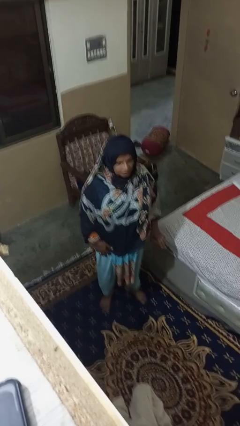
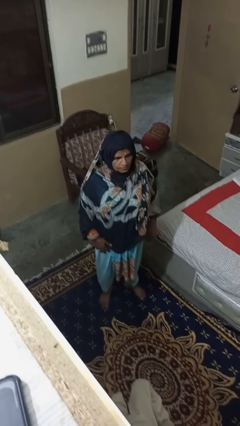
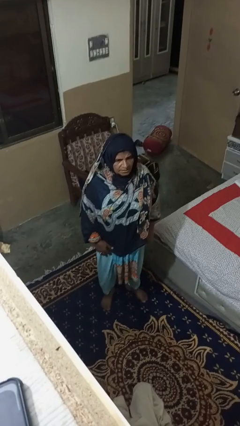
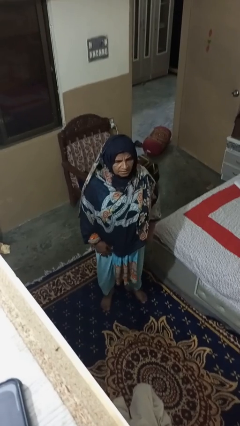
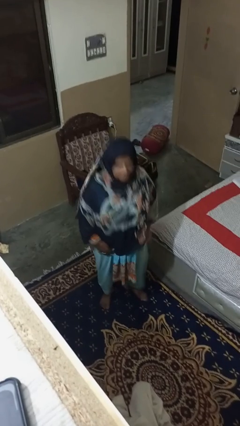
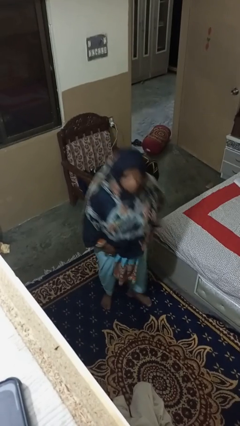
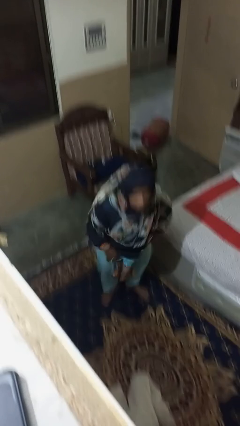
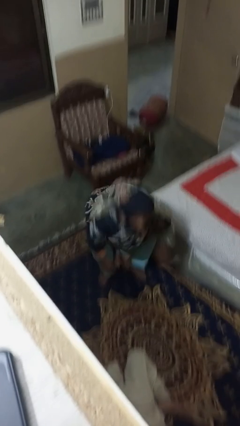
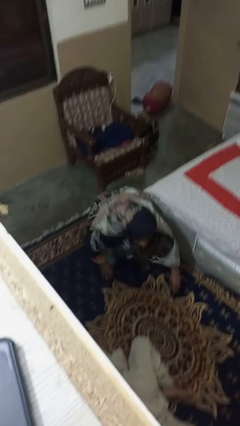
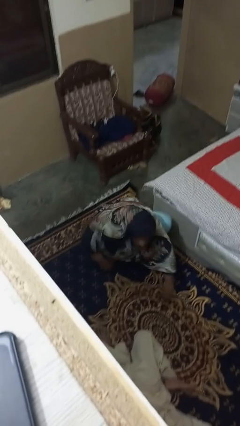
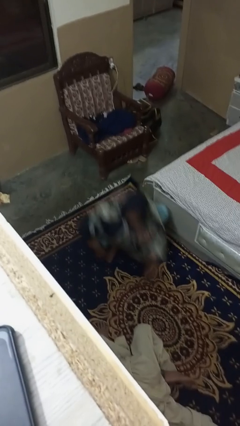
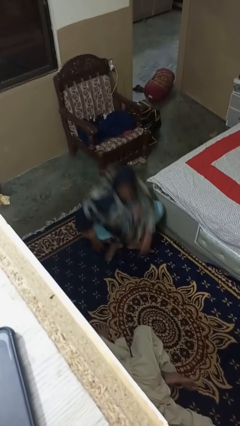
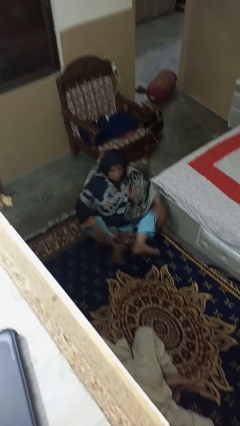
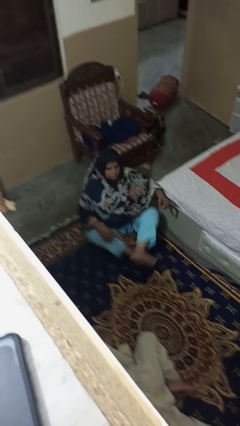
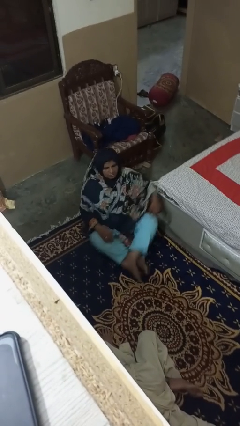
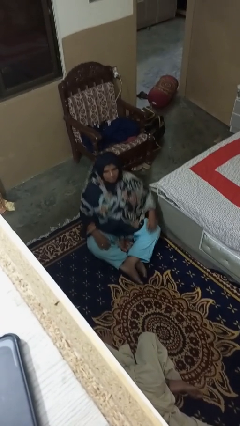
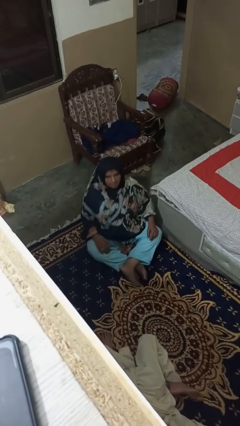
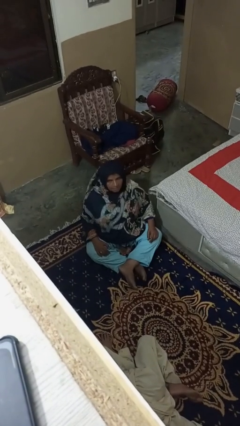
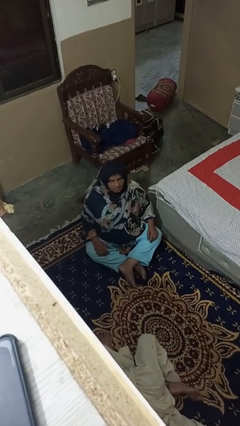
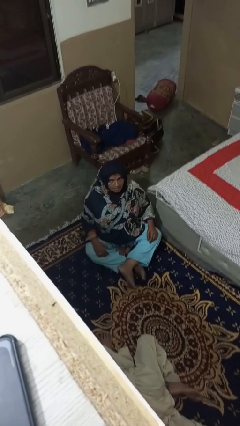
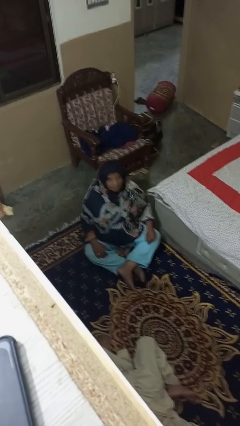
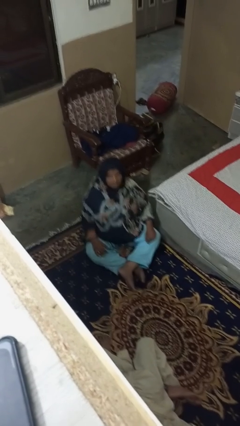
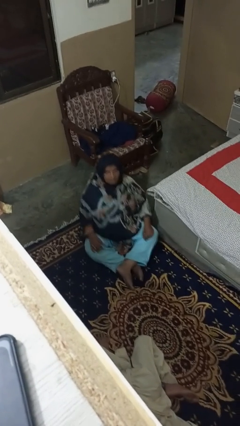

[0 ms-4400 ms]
person sits crisscross

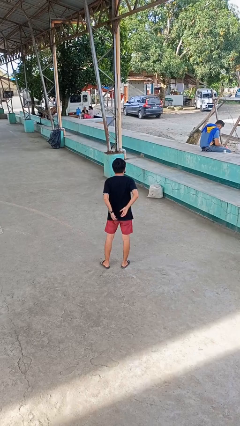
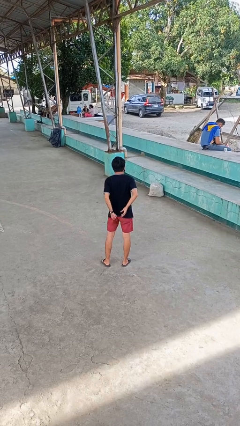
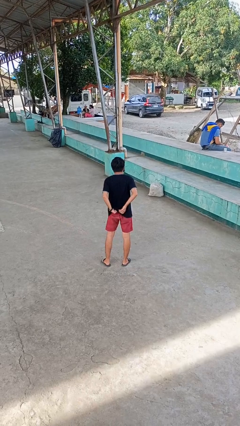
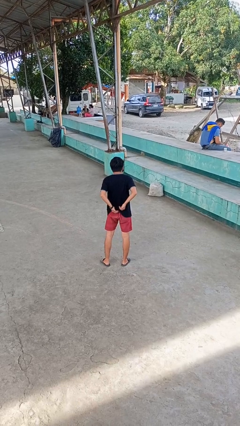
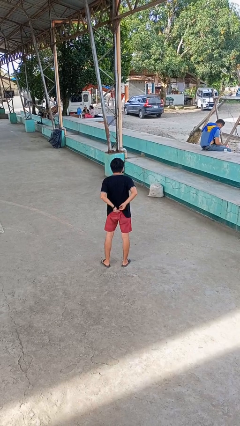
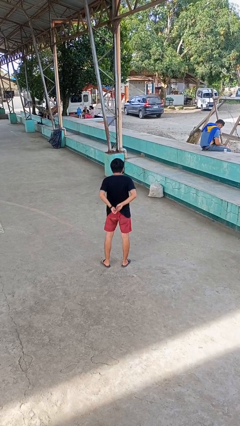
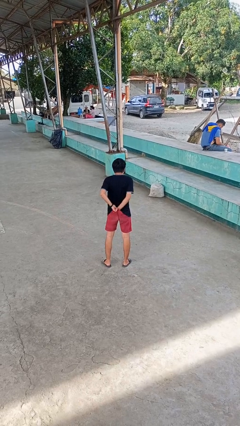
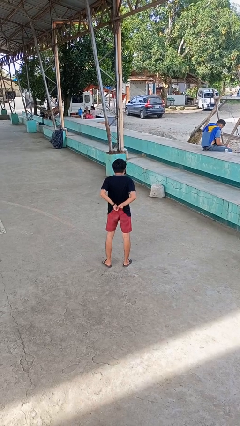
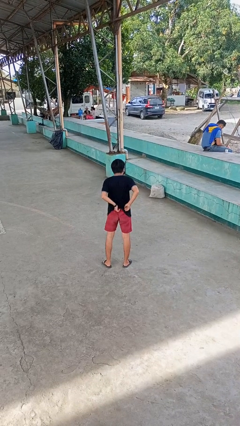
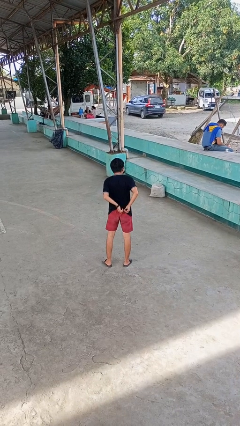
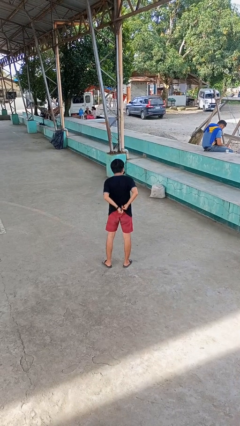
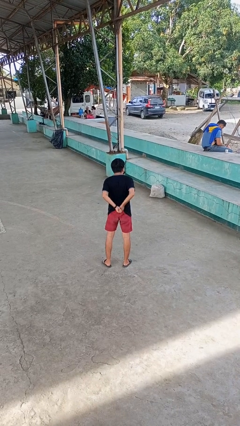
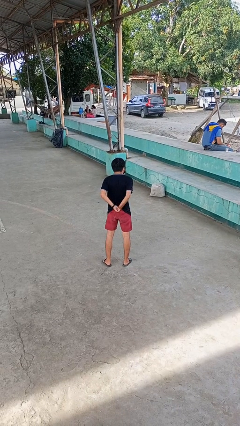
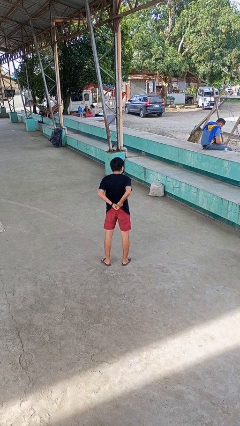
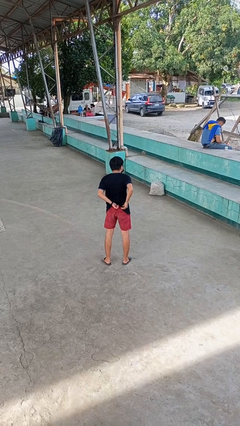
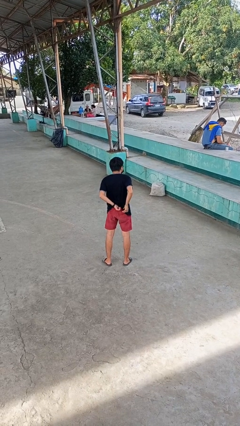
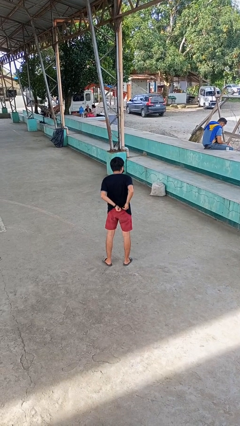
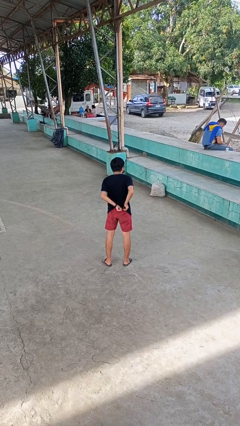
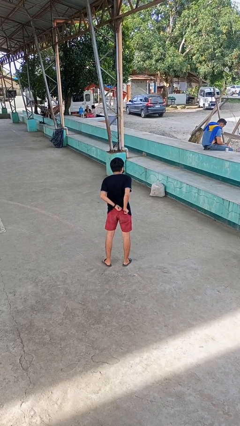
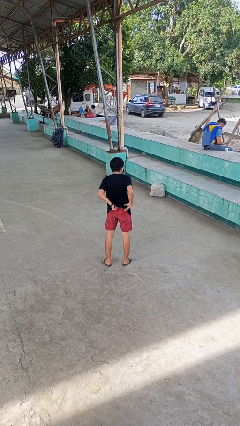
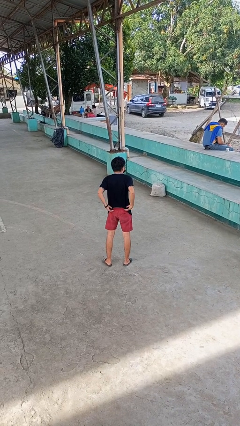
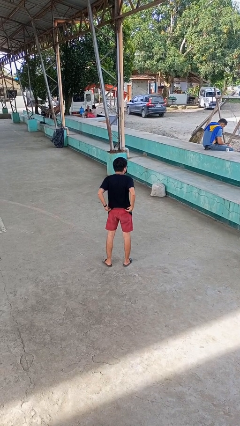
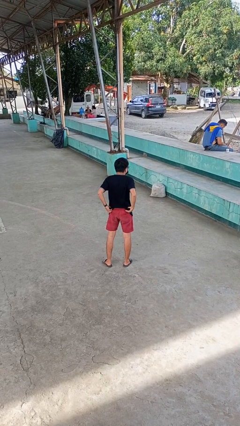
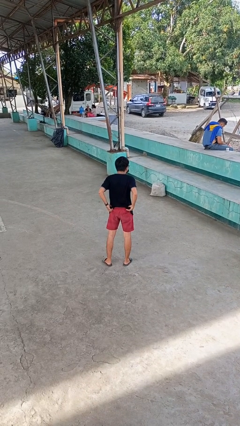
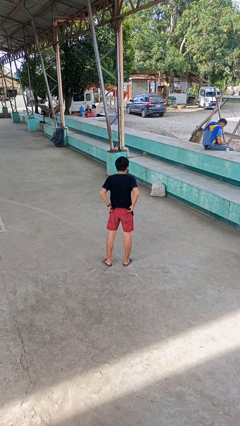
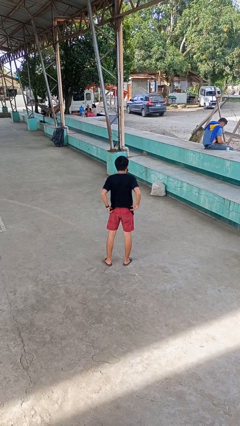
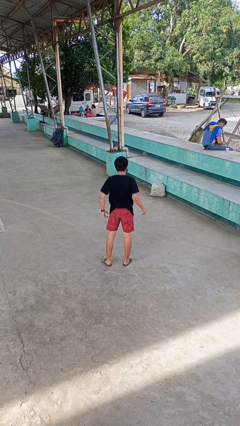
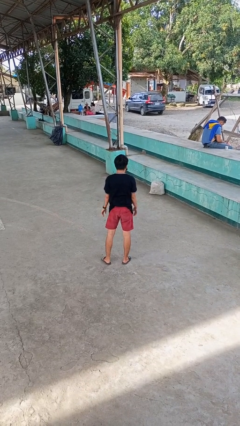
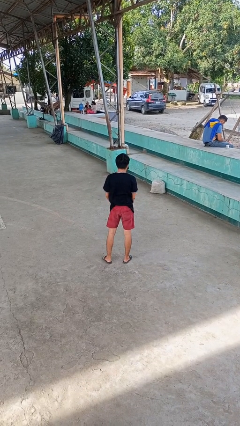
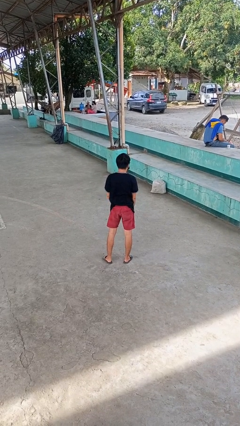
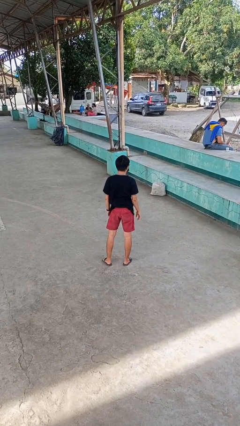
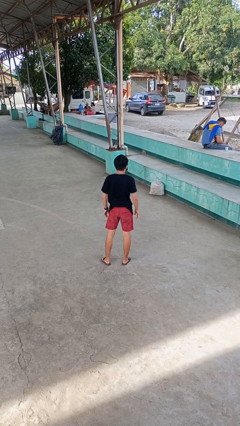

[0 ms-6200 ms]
person tucks in shirt

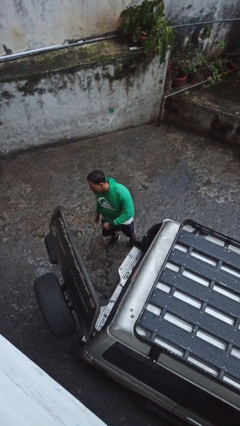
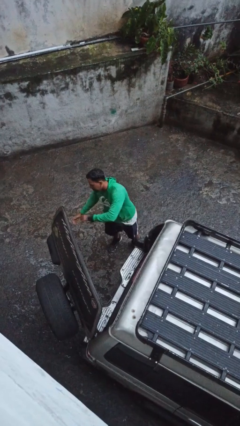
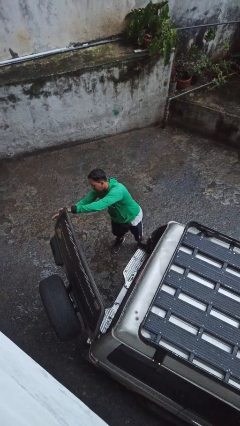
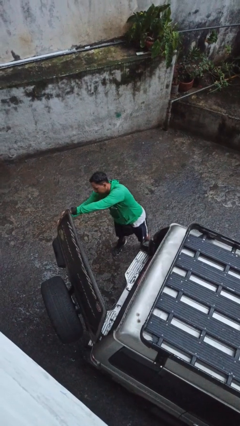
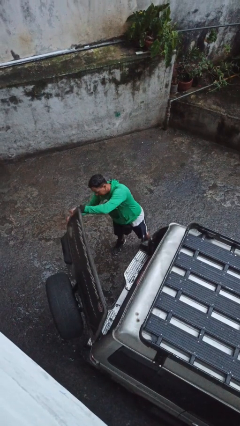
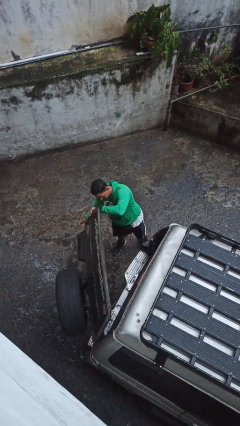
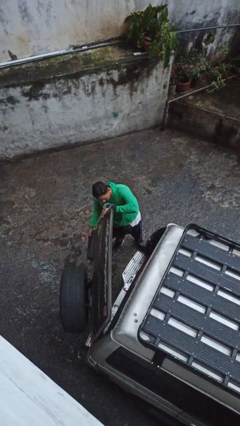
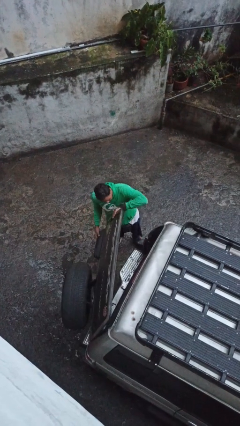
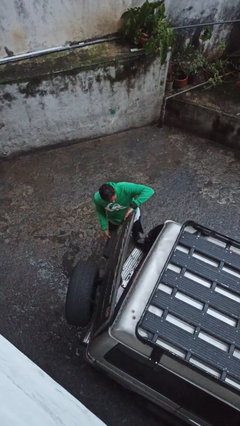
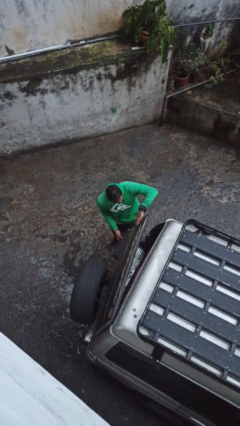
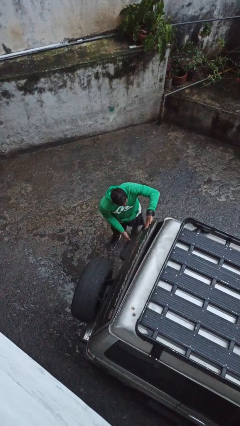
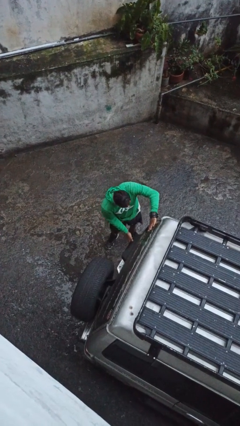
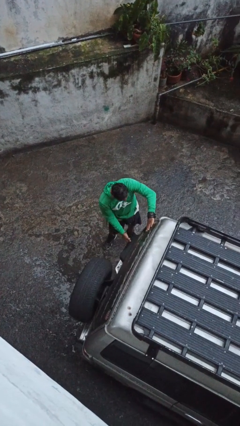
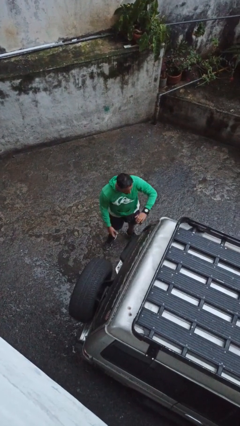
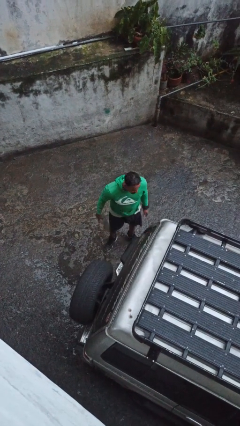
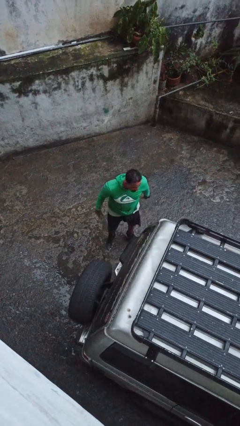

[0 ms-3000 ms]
person closes car trunk

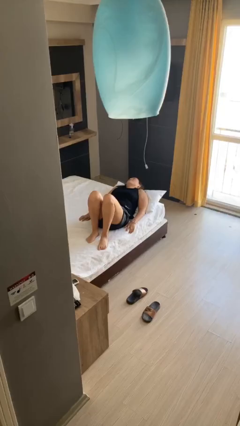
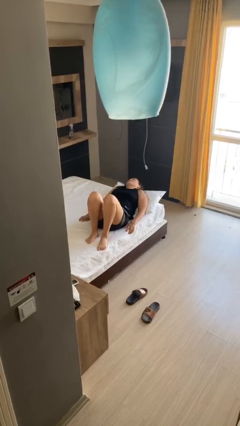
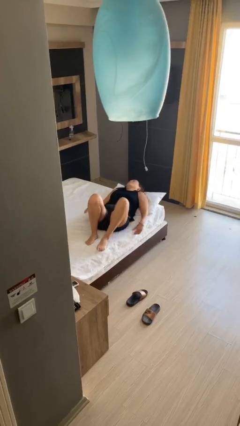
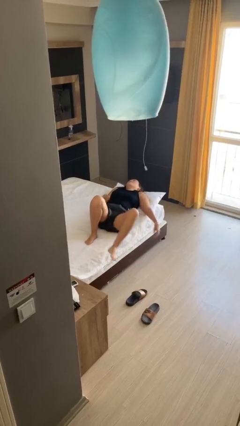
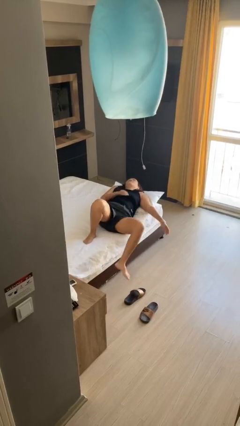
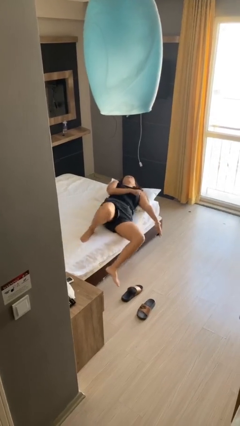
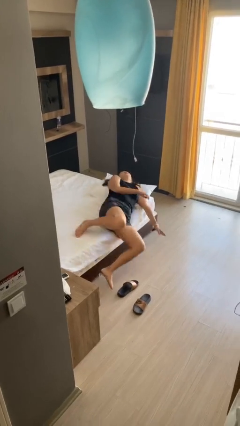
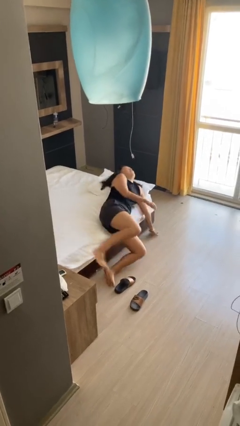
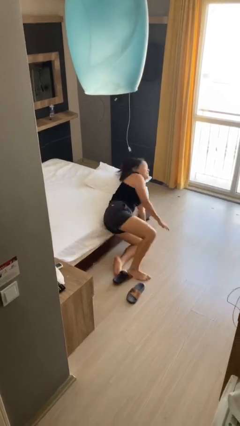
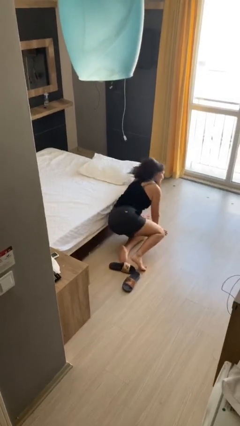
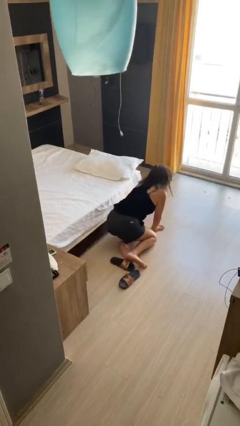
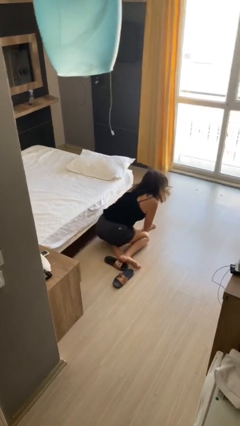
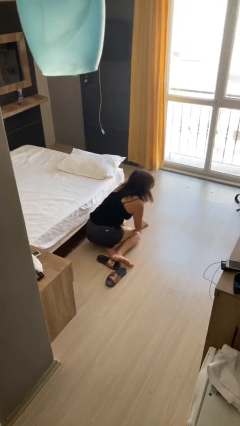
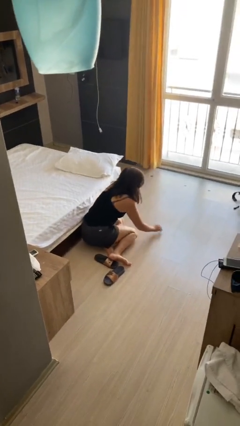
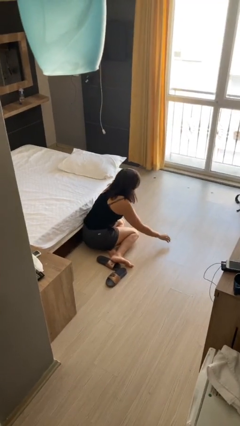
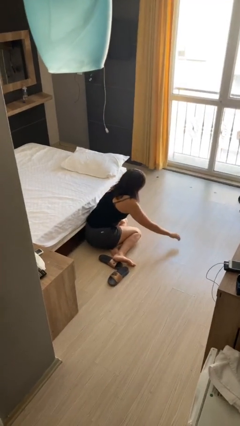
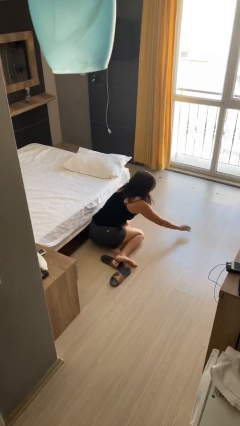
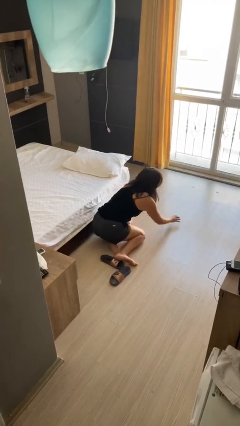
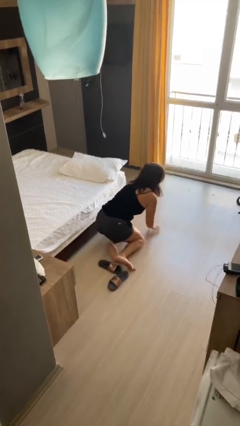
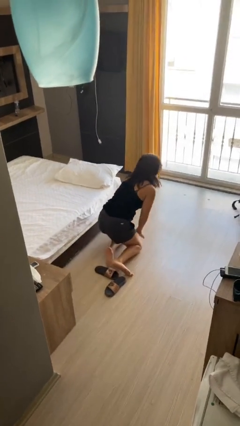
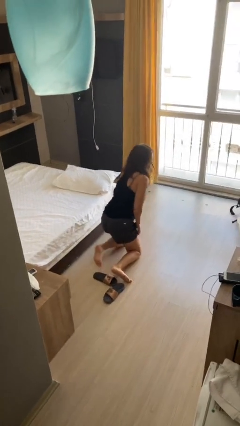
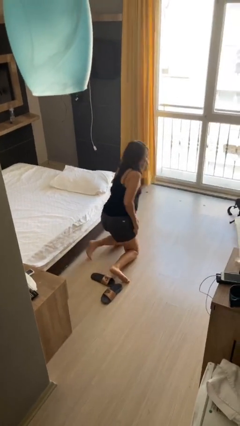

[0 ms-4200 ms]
person falls from bed

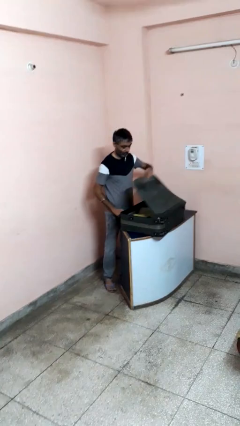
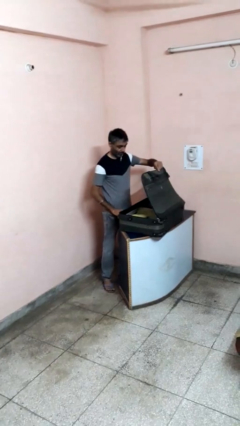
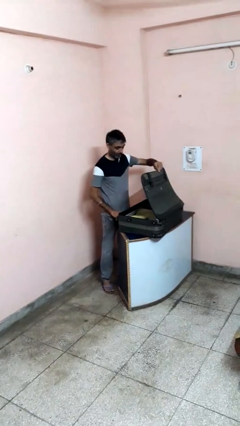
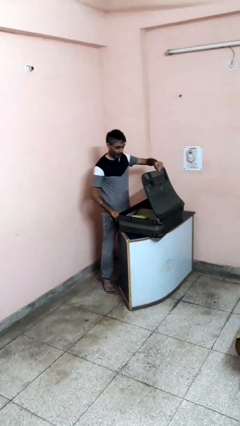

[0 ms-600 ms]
person opens suitcase
